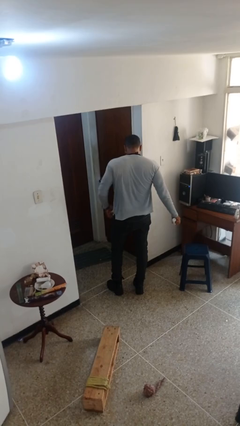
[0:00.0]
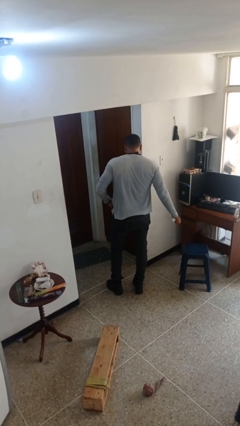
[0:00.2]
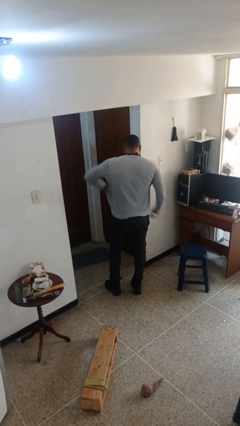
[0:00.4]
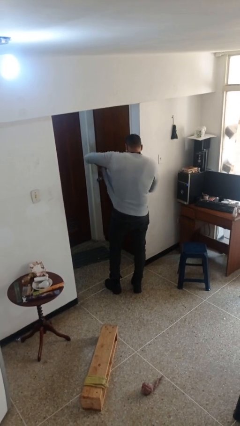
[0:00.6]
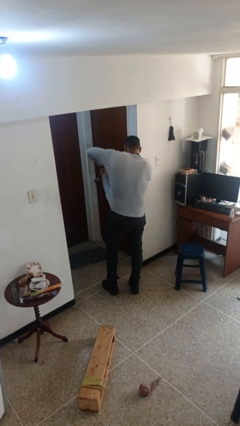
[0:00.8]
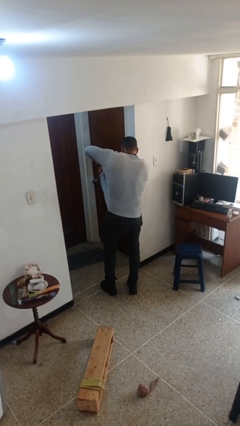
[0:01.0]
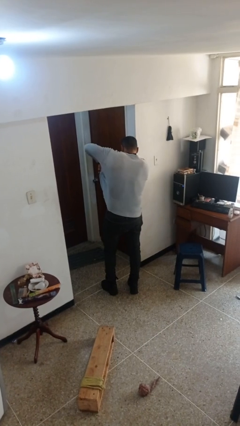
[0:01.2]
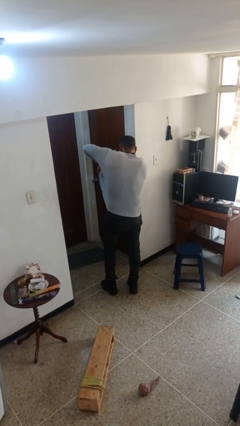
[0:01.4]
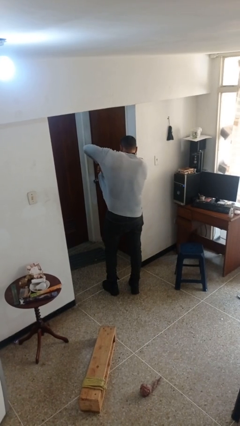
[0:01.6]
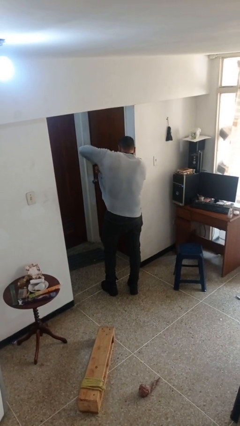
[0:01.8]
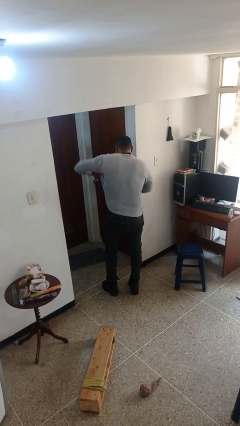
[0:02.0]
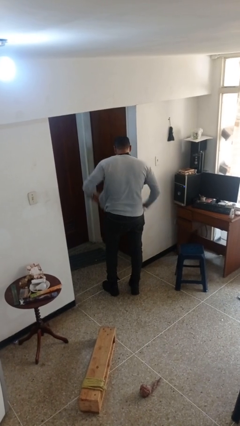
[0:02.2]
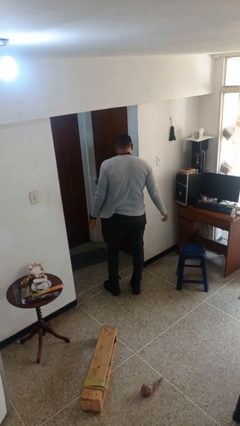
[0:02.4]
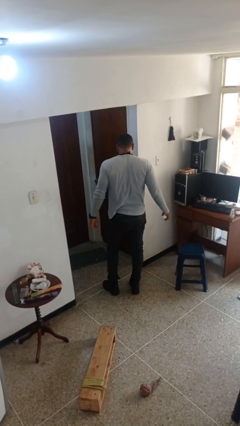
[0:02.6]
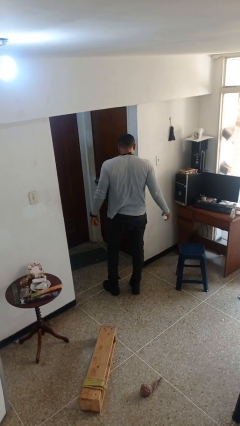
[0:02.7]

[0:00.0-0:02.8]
person applies deodorant

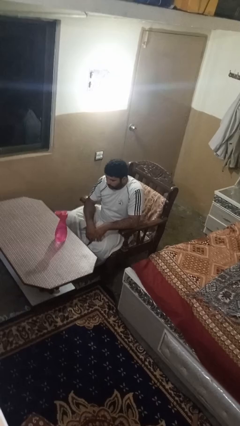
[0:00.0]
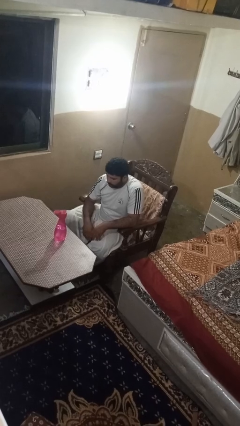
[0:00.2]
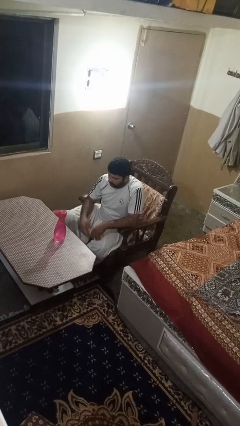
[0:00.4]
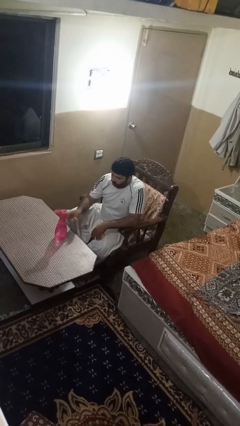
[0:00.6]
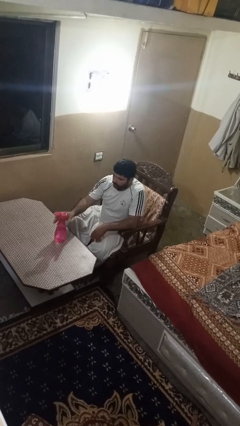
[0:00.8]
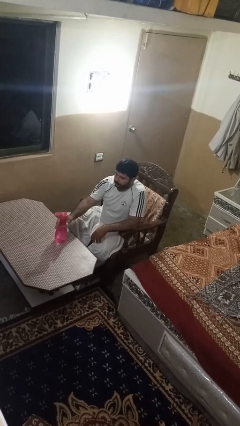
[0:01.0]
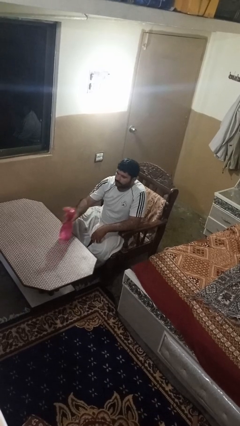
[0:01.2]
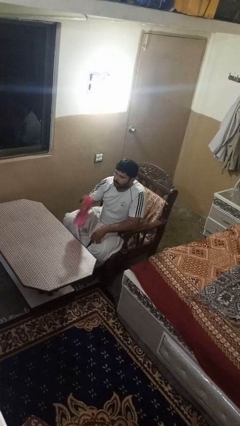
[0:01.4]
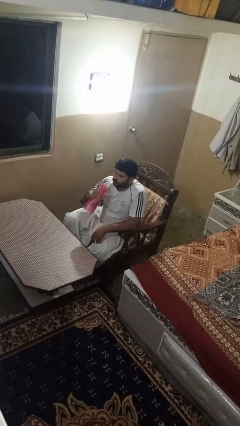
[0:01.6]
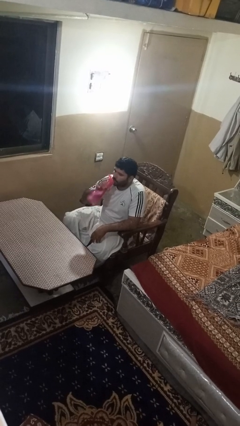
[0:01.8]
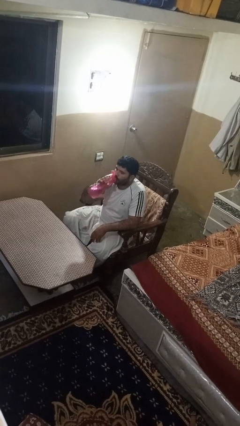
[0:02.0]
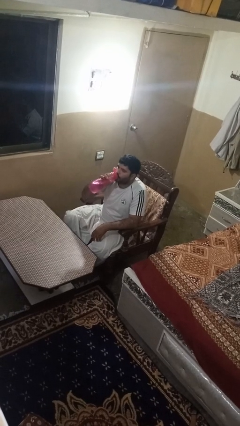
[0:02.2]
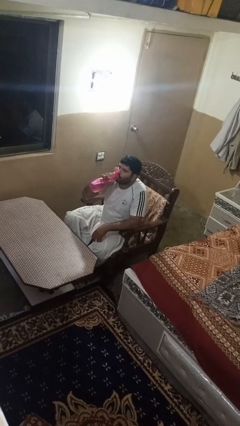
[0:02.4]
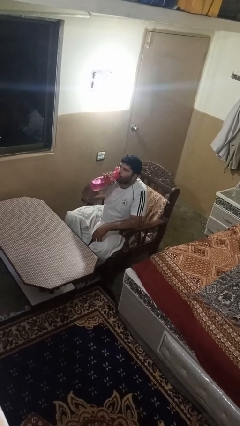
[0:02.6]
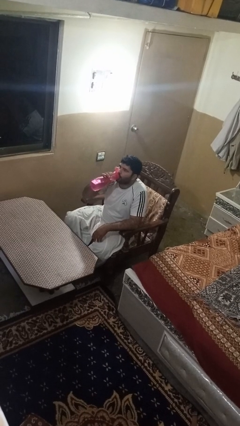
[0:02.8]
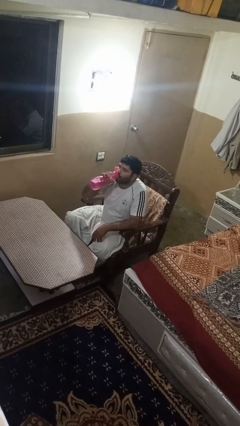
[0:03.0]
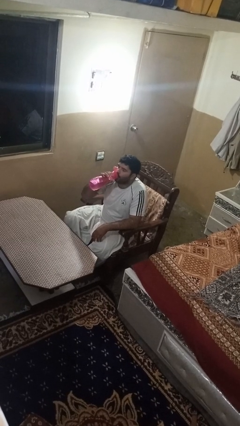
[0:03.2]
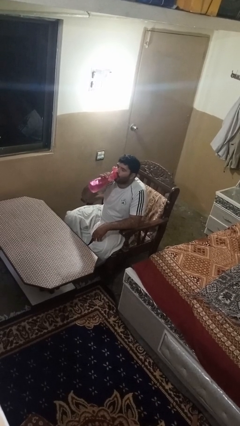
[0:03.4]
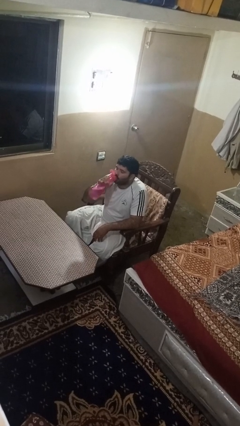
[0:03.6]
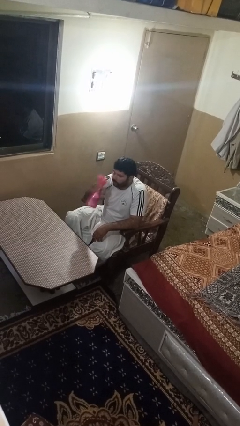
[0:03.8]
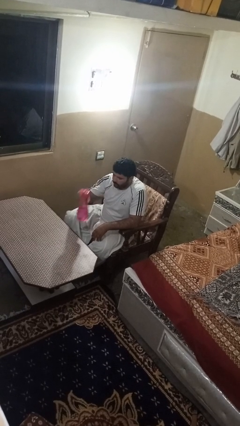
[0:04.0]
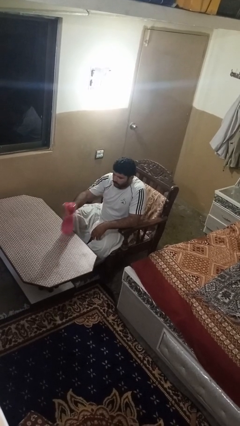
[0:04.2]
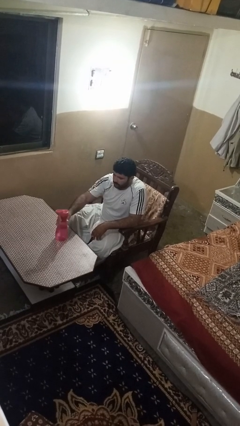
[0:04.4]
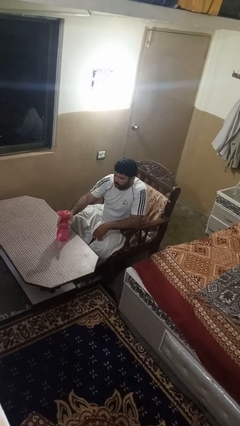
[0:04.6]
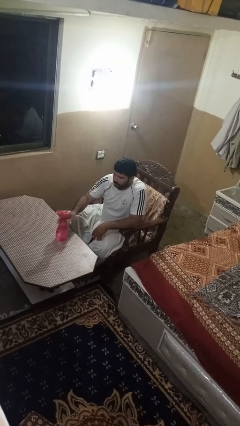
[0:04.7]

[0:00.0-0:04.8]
person drinks from bottle

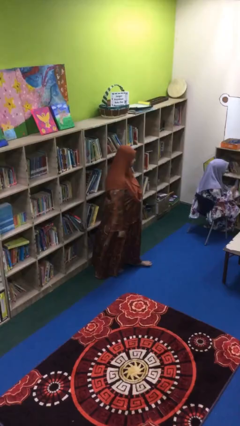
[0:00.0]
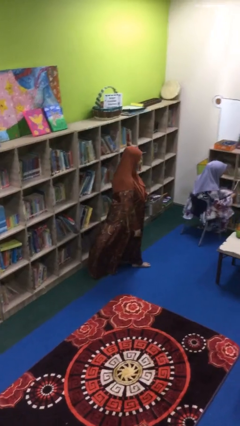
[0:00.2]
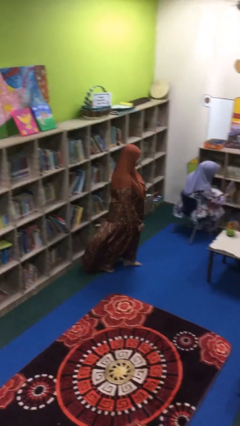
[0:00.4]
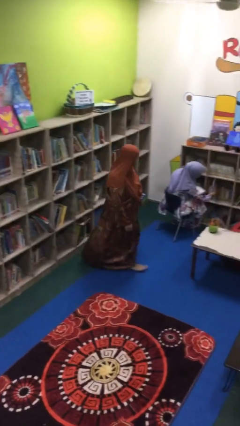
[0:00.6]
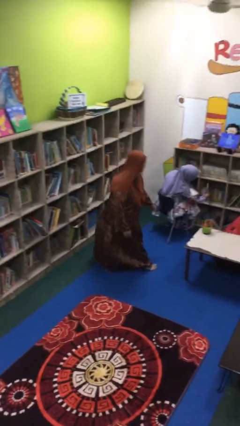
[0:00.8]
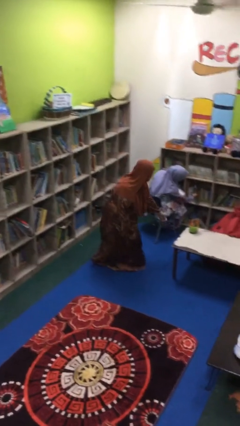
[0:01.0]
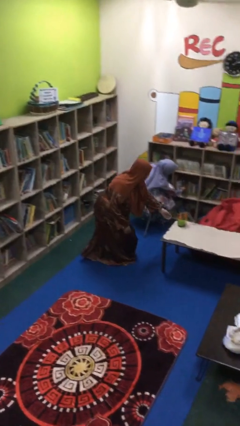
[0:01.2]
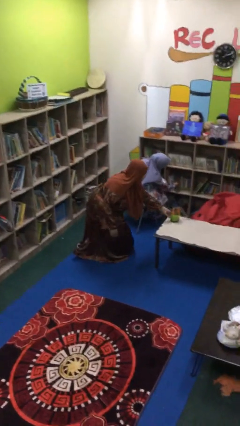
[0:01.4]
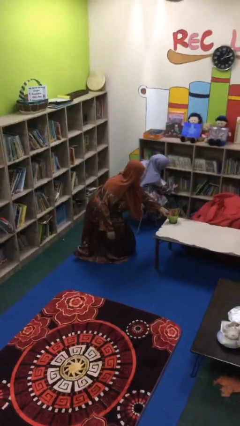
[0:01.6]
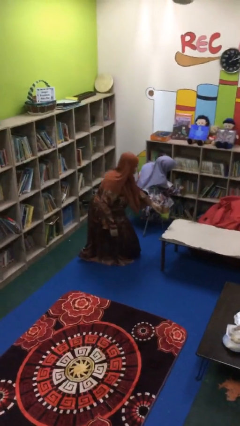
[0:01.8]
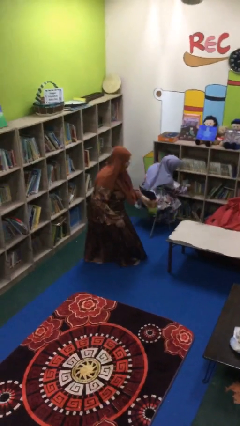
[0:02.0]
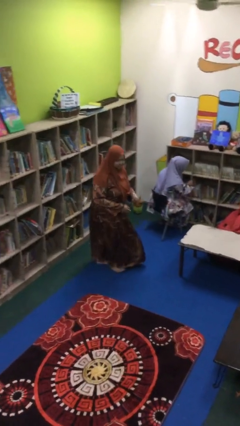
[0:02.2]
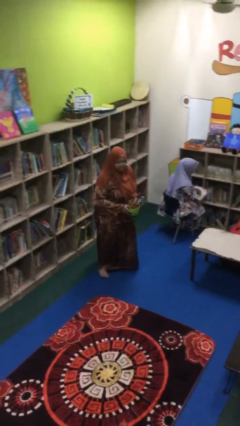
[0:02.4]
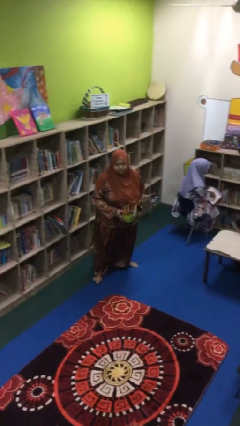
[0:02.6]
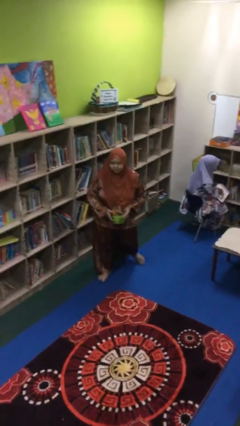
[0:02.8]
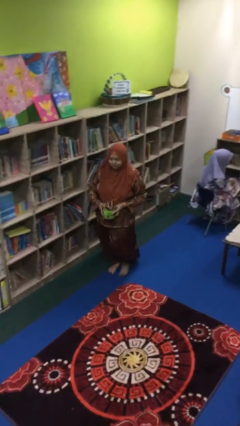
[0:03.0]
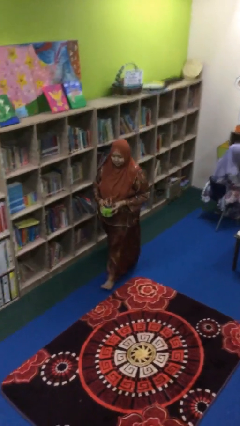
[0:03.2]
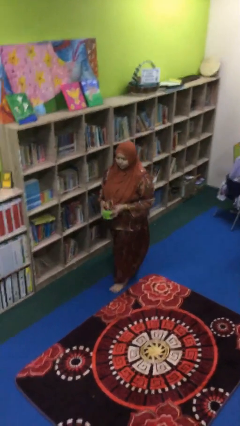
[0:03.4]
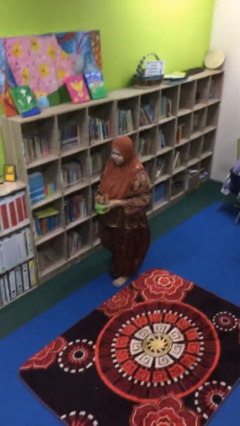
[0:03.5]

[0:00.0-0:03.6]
person steals object from person

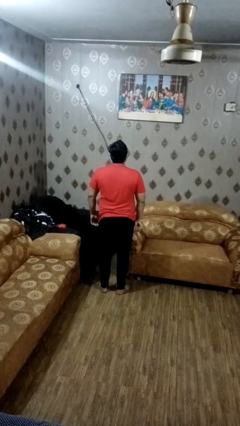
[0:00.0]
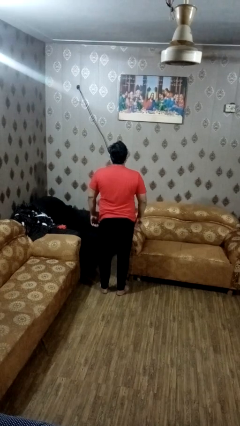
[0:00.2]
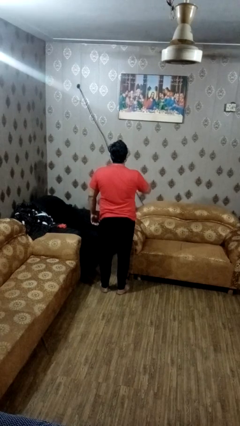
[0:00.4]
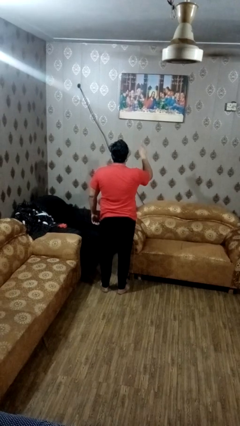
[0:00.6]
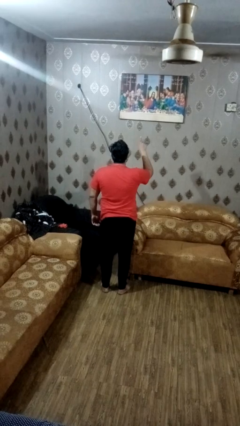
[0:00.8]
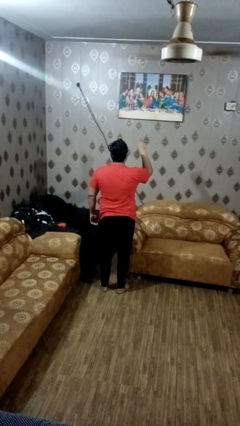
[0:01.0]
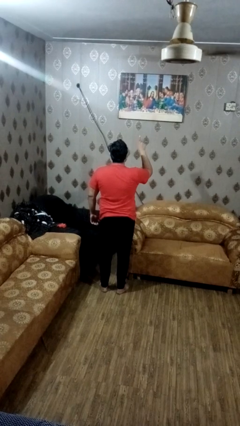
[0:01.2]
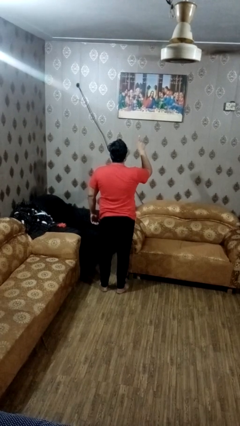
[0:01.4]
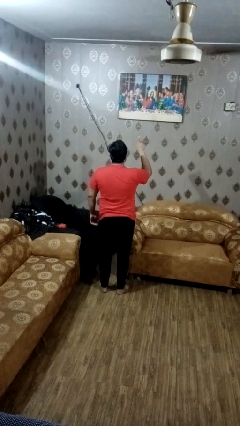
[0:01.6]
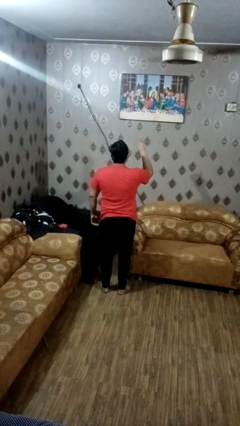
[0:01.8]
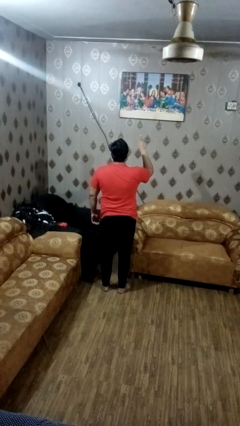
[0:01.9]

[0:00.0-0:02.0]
person gestures number one

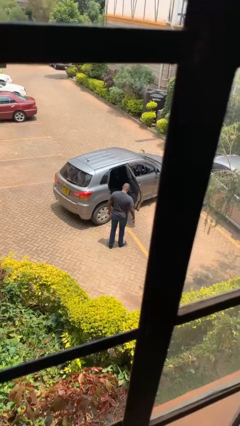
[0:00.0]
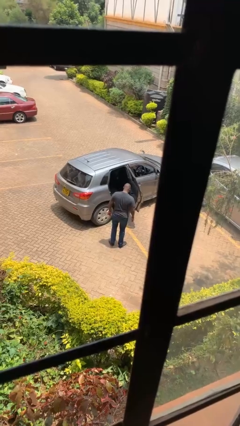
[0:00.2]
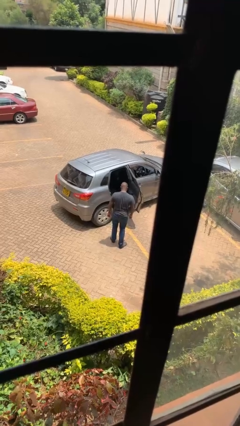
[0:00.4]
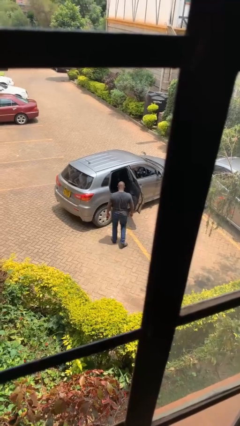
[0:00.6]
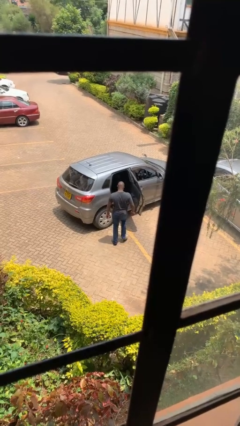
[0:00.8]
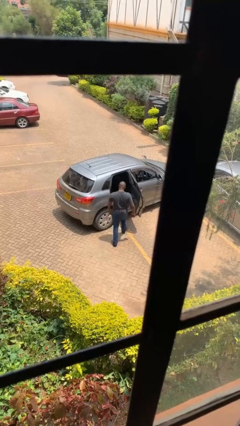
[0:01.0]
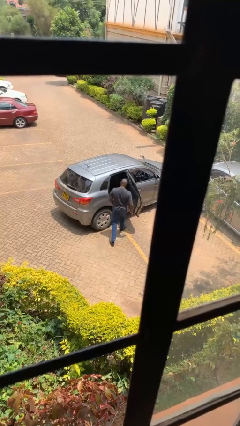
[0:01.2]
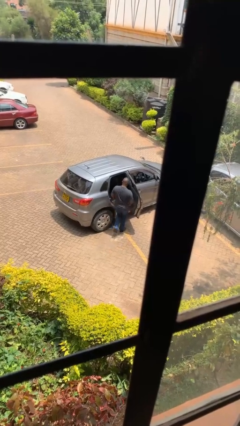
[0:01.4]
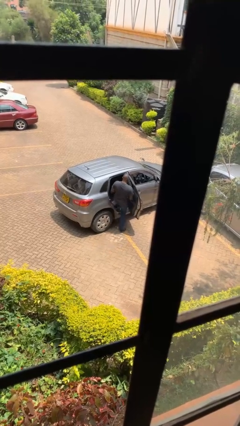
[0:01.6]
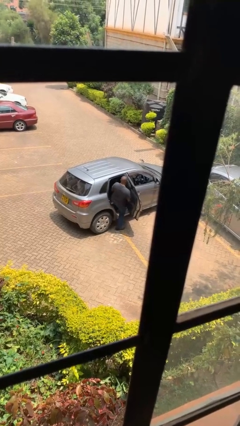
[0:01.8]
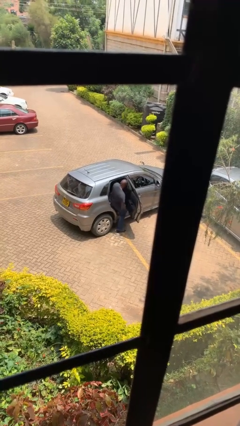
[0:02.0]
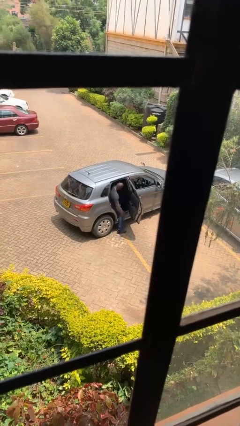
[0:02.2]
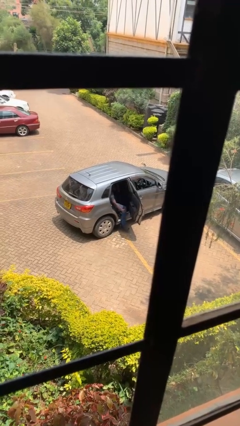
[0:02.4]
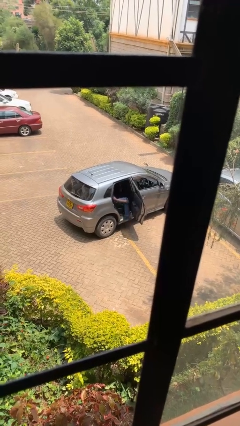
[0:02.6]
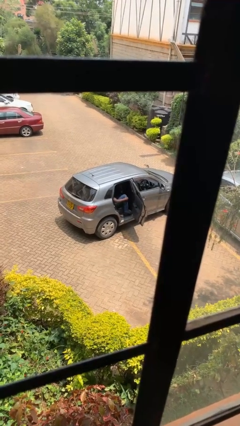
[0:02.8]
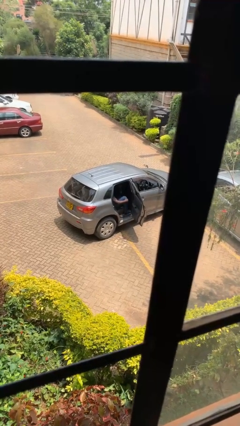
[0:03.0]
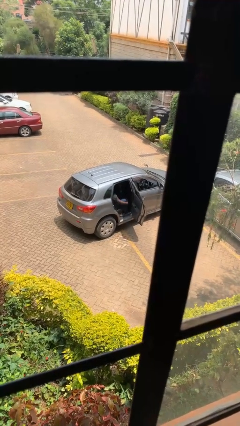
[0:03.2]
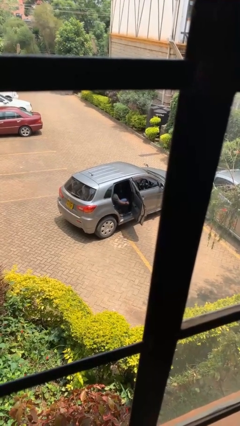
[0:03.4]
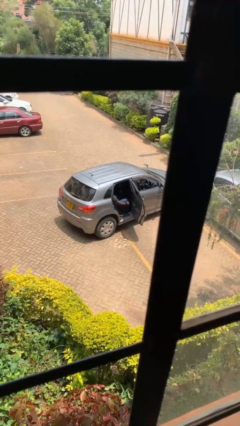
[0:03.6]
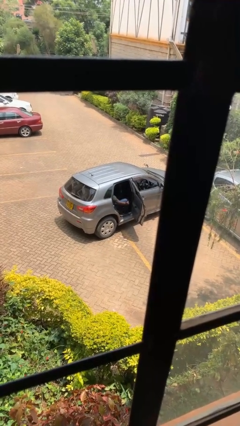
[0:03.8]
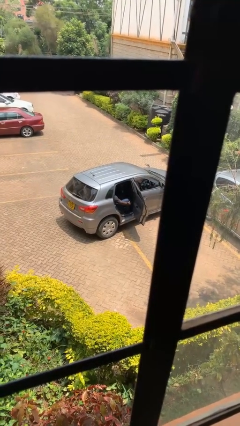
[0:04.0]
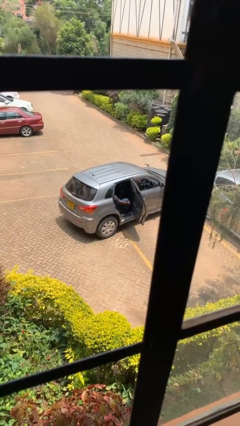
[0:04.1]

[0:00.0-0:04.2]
person enters car

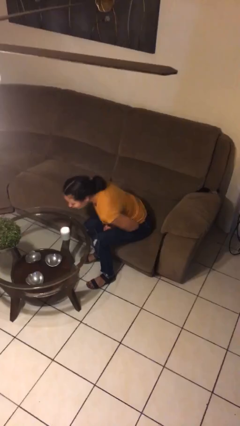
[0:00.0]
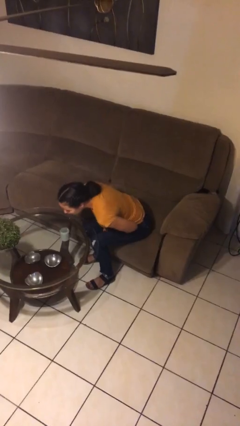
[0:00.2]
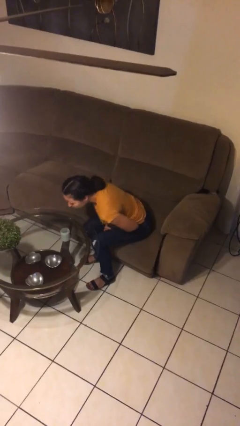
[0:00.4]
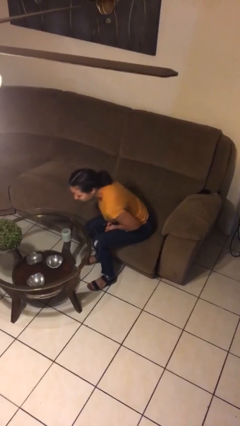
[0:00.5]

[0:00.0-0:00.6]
person extinguishes candle
